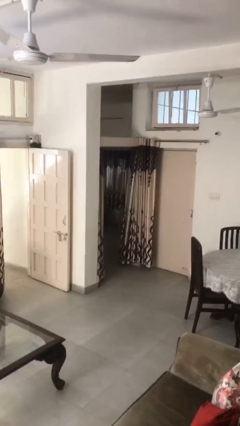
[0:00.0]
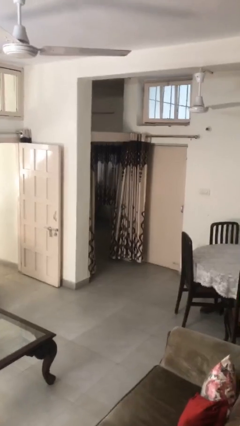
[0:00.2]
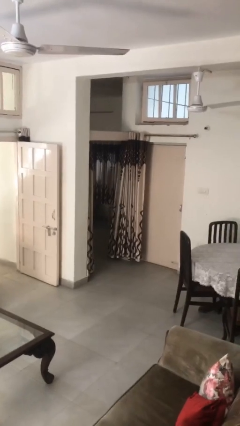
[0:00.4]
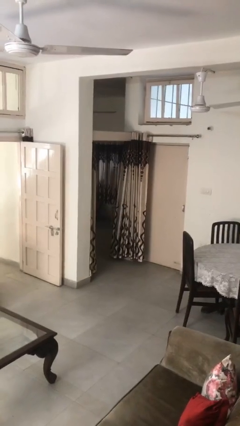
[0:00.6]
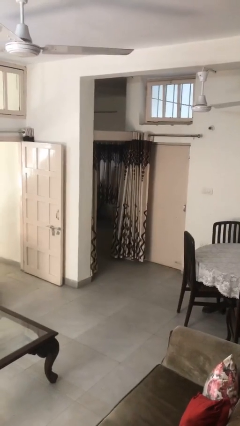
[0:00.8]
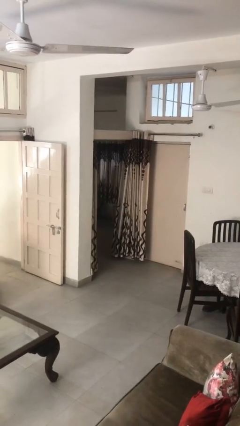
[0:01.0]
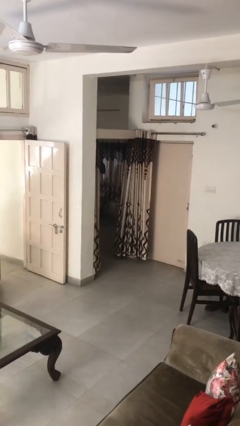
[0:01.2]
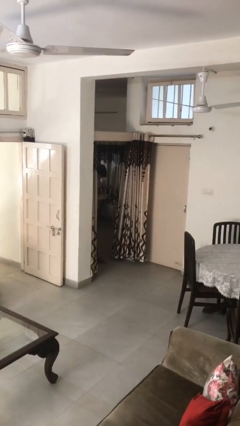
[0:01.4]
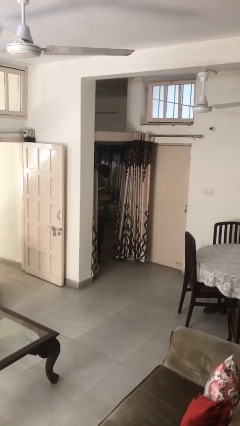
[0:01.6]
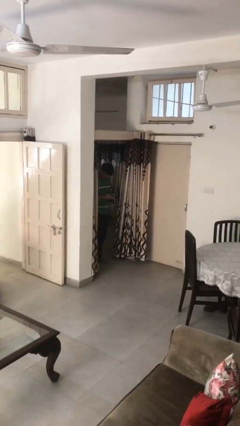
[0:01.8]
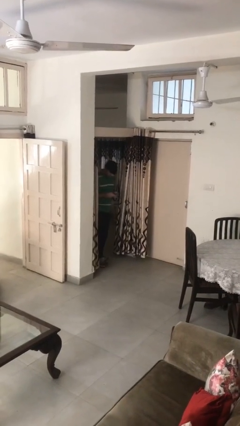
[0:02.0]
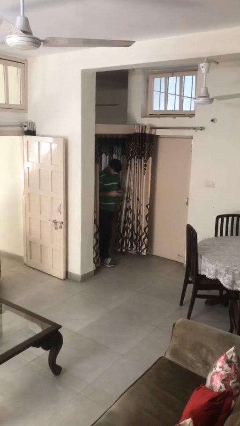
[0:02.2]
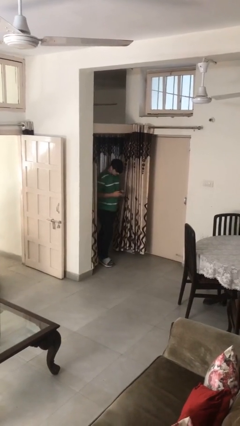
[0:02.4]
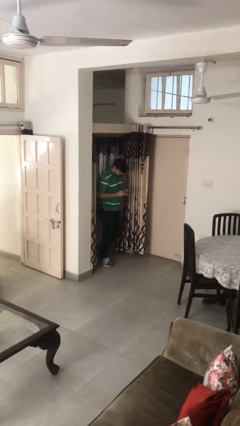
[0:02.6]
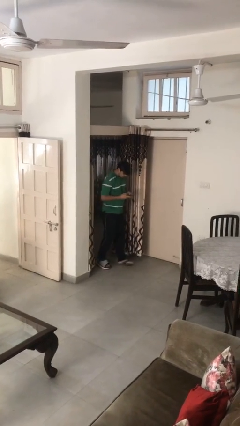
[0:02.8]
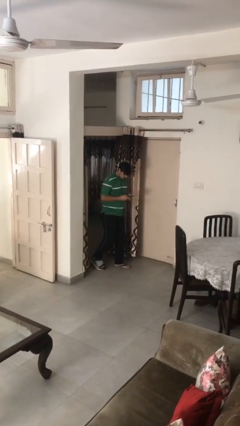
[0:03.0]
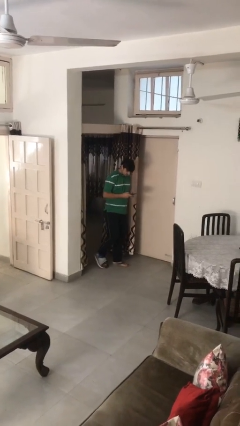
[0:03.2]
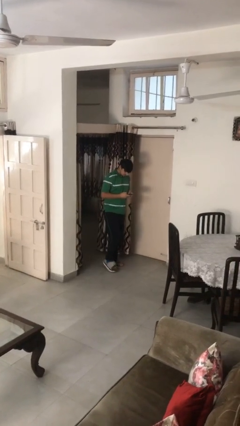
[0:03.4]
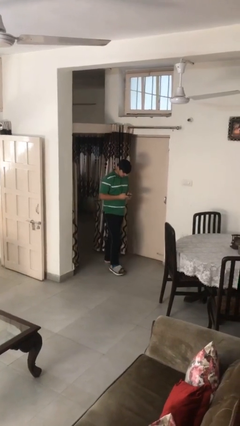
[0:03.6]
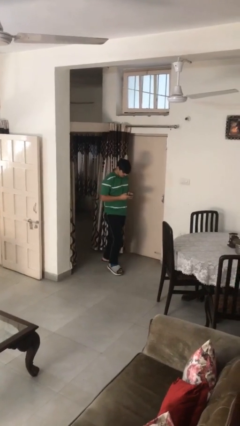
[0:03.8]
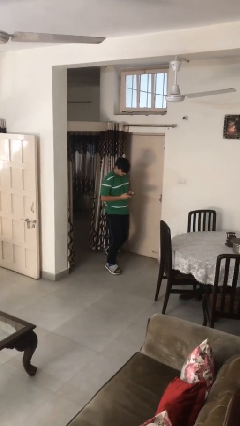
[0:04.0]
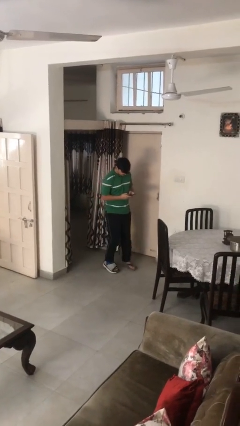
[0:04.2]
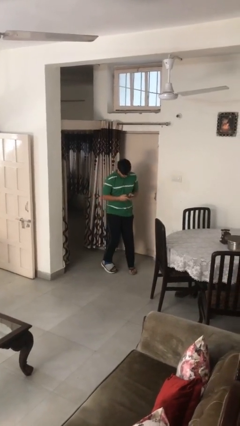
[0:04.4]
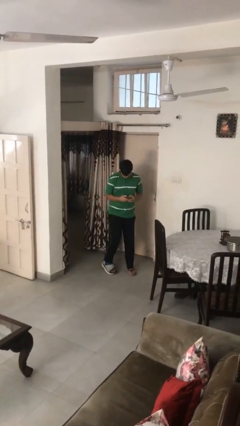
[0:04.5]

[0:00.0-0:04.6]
person enters scene through structure

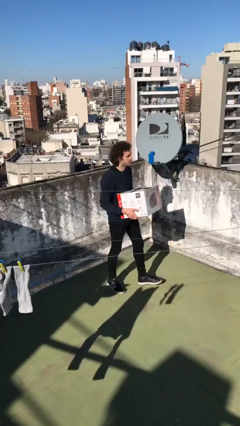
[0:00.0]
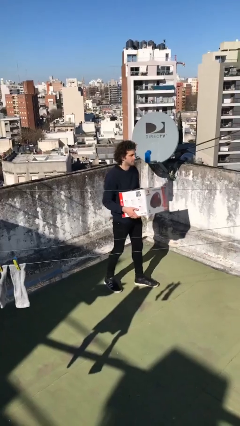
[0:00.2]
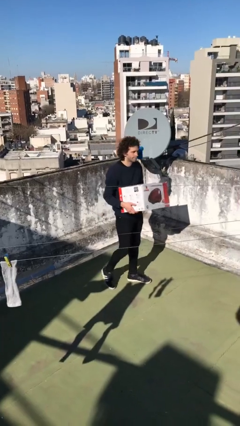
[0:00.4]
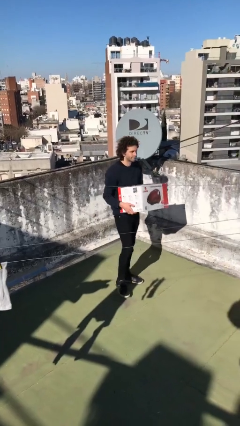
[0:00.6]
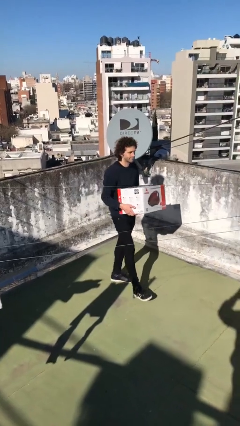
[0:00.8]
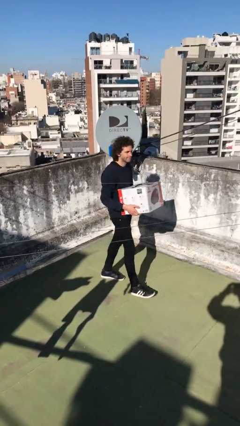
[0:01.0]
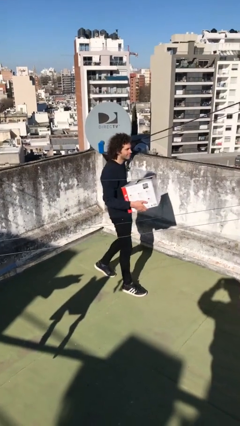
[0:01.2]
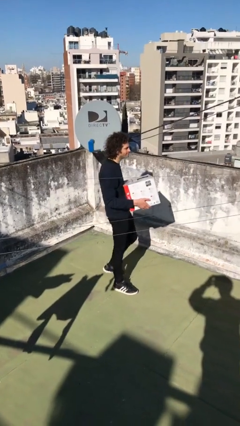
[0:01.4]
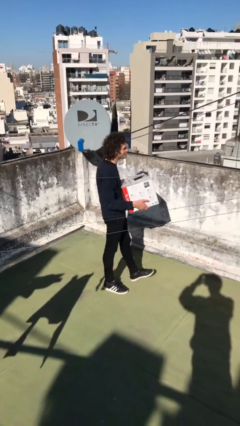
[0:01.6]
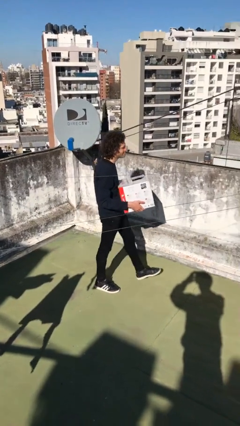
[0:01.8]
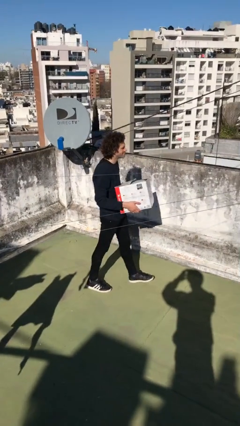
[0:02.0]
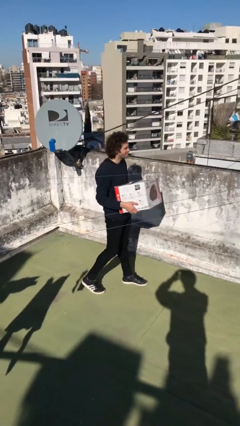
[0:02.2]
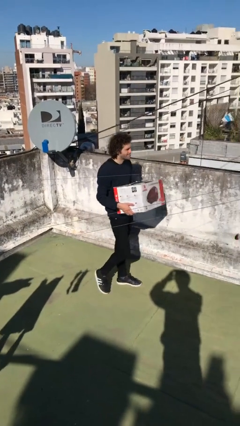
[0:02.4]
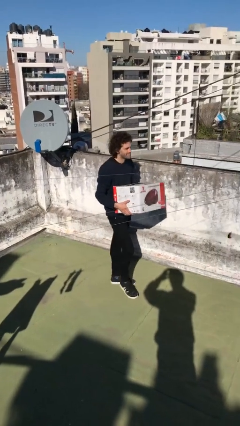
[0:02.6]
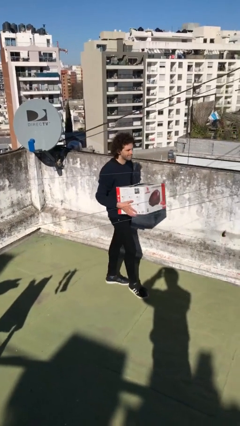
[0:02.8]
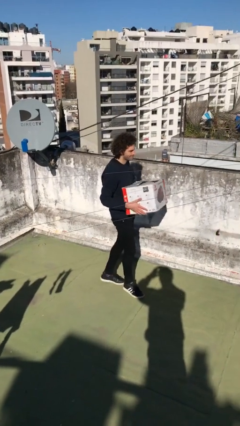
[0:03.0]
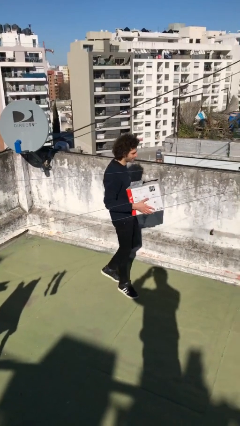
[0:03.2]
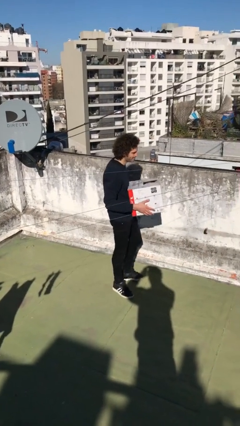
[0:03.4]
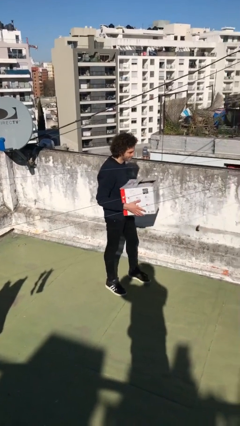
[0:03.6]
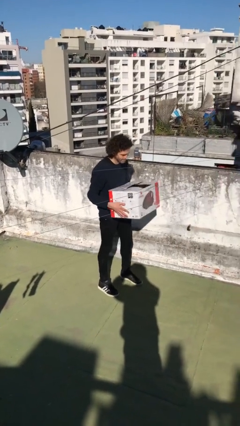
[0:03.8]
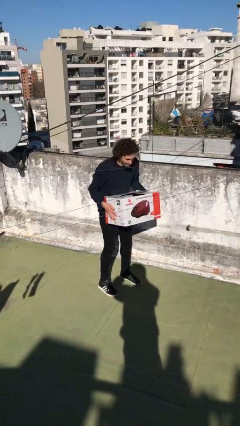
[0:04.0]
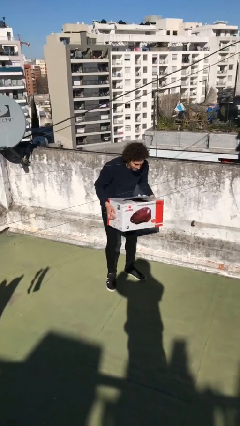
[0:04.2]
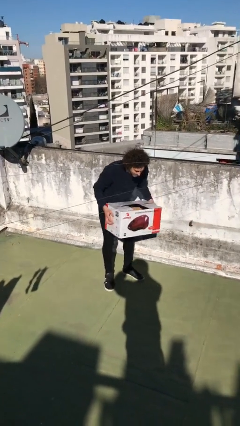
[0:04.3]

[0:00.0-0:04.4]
person carries heavy object

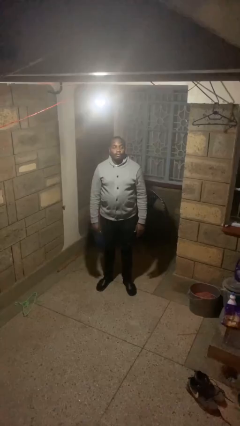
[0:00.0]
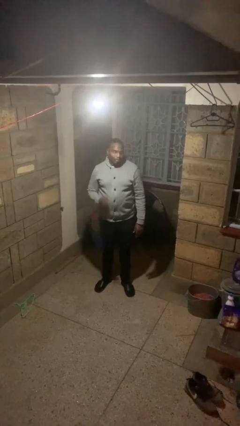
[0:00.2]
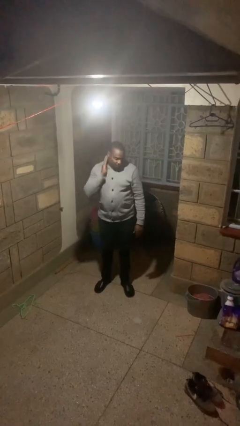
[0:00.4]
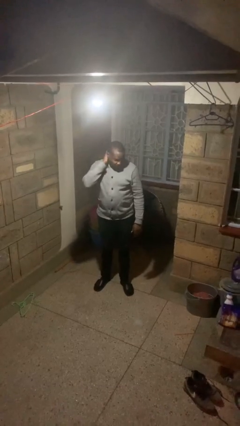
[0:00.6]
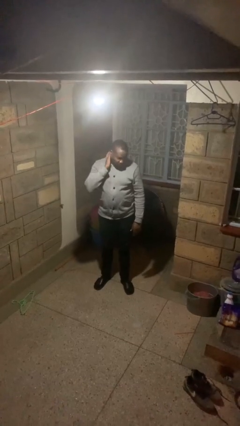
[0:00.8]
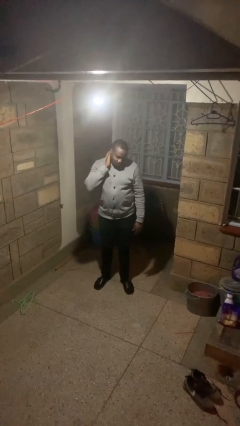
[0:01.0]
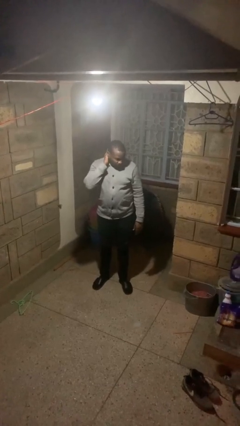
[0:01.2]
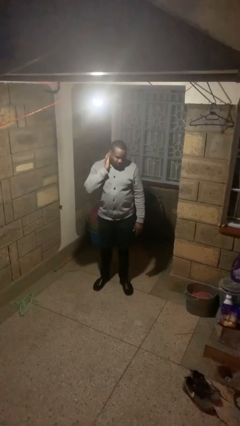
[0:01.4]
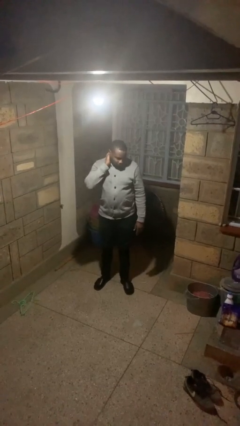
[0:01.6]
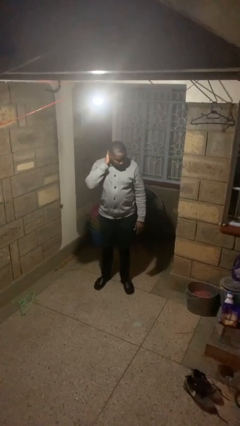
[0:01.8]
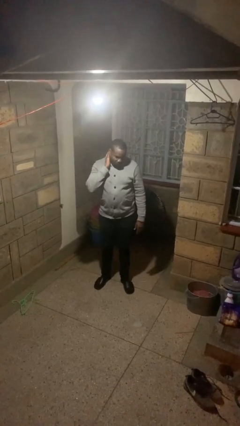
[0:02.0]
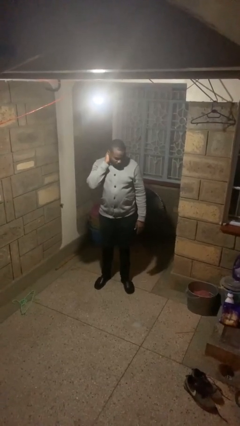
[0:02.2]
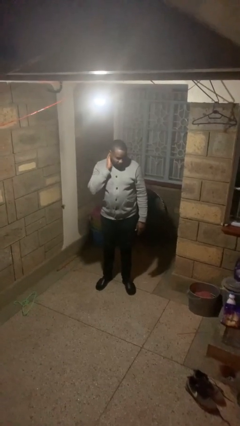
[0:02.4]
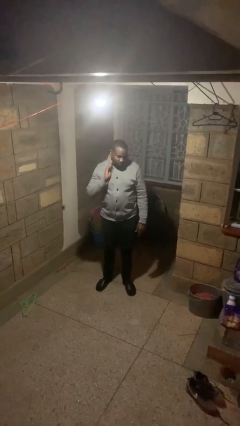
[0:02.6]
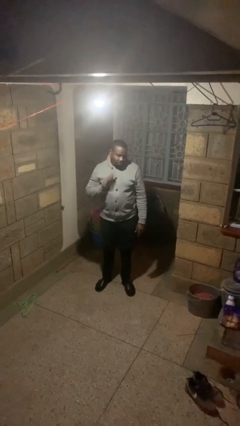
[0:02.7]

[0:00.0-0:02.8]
person rubs neck

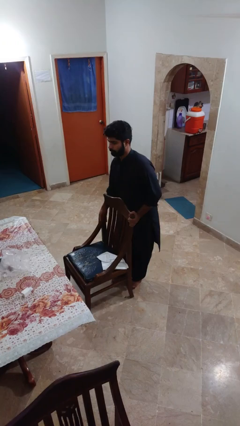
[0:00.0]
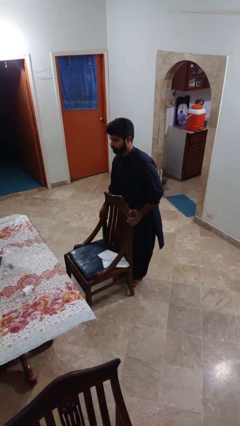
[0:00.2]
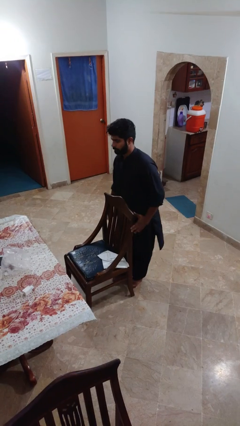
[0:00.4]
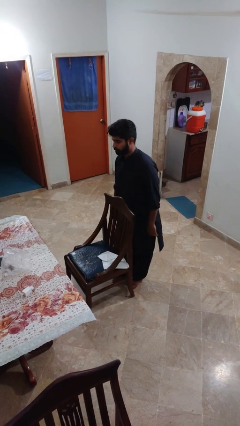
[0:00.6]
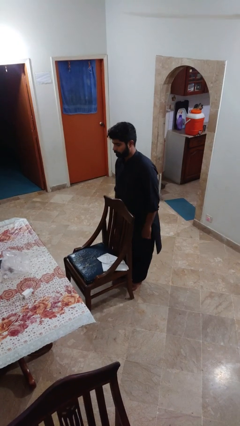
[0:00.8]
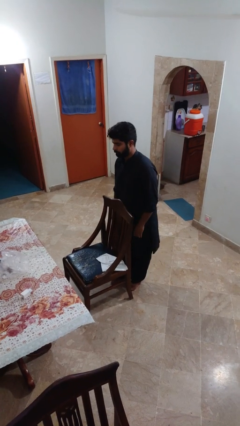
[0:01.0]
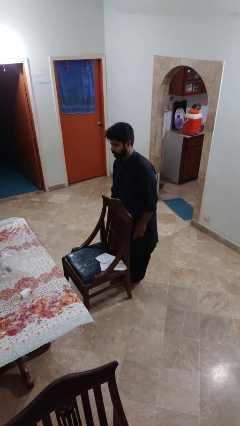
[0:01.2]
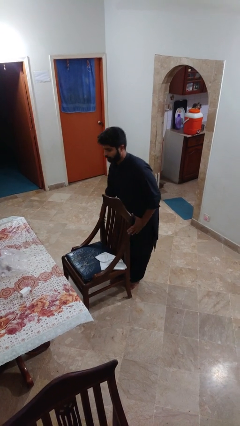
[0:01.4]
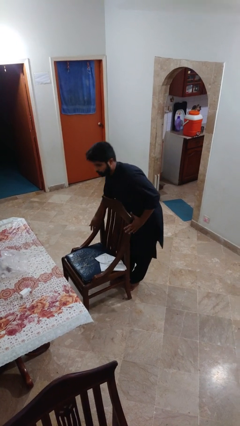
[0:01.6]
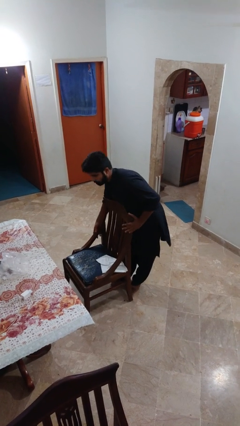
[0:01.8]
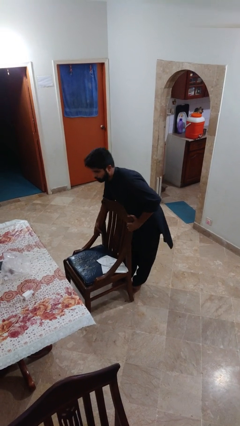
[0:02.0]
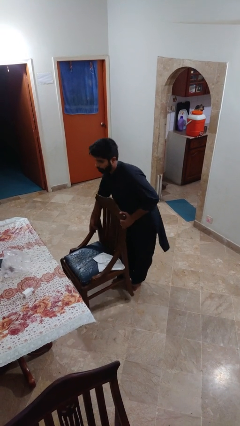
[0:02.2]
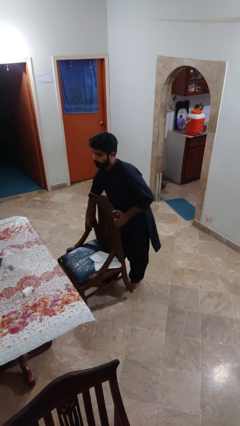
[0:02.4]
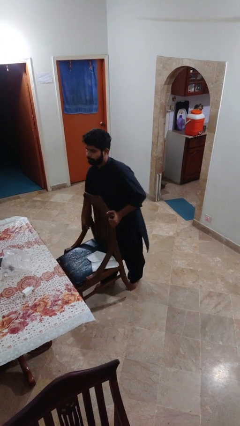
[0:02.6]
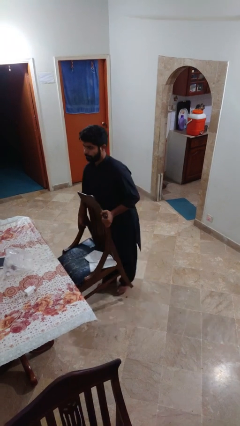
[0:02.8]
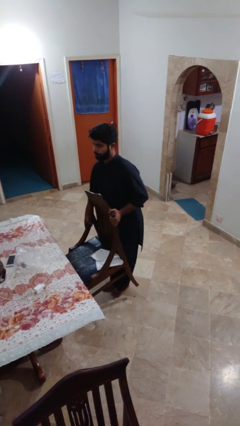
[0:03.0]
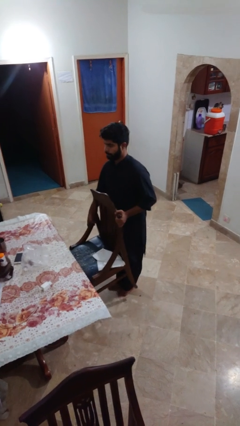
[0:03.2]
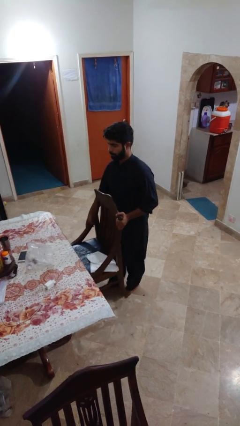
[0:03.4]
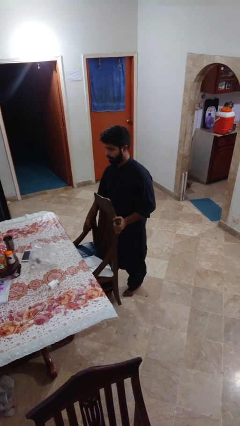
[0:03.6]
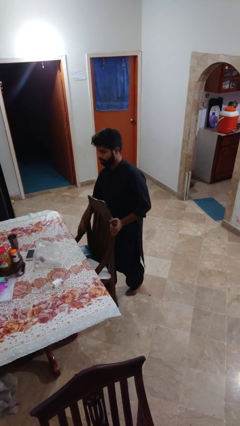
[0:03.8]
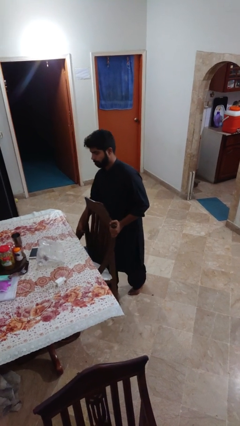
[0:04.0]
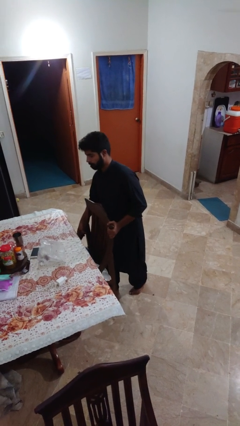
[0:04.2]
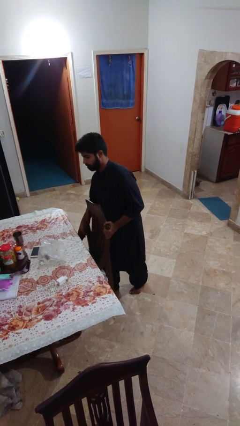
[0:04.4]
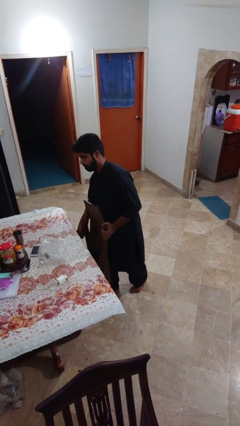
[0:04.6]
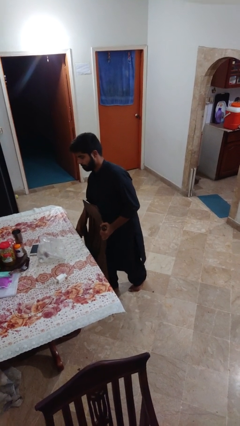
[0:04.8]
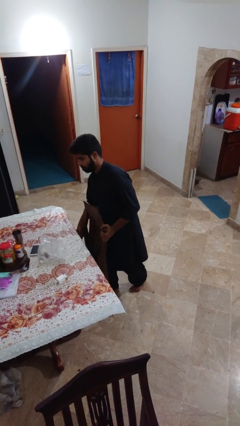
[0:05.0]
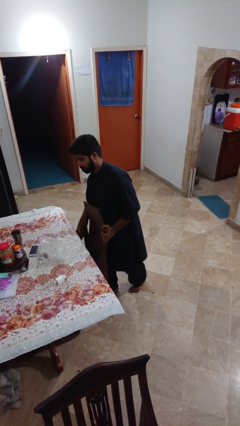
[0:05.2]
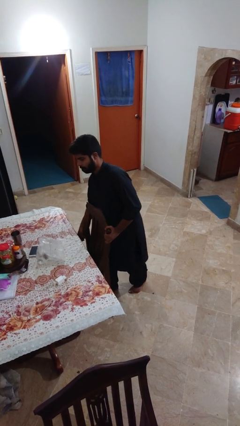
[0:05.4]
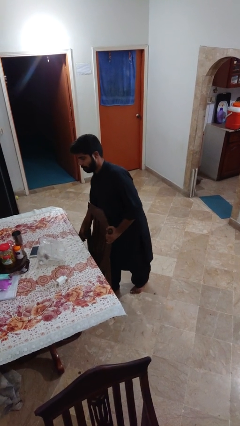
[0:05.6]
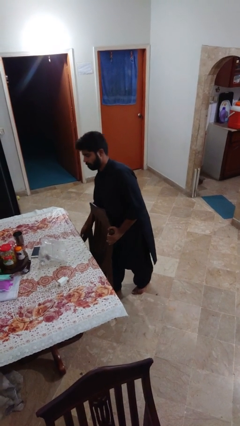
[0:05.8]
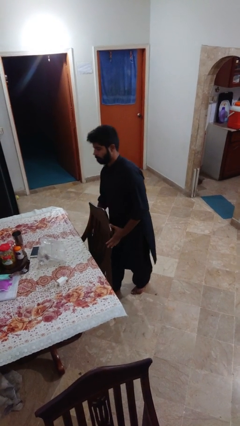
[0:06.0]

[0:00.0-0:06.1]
person pushes in chair
